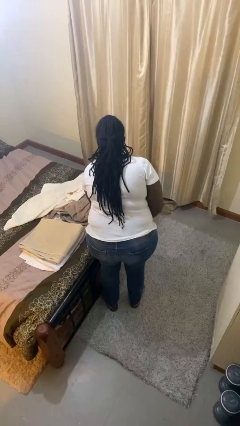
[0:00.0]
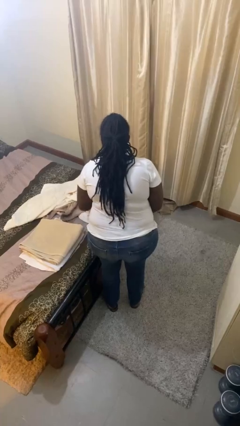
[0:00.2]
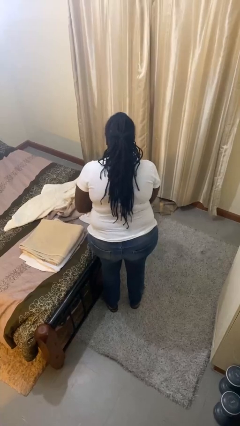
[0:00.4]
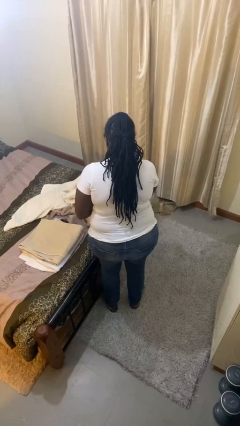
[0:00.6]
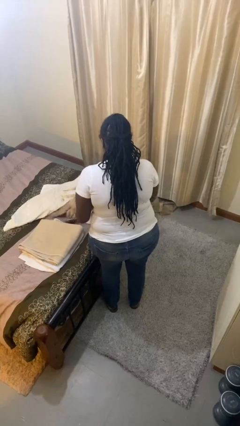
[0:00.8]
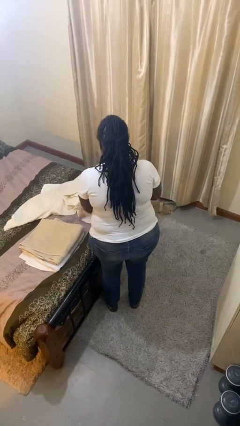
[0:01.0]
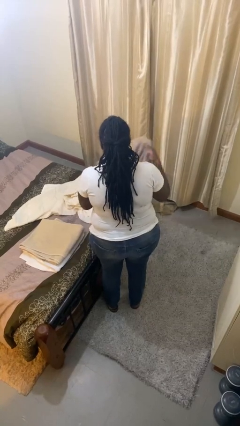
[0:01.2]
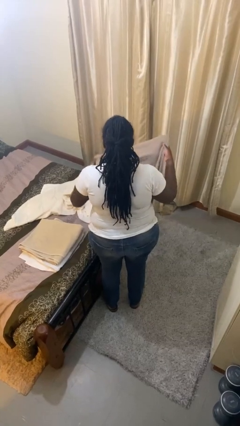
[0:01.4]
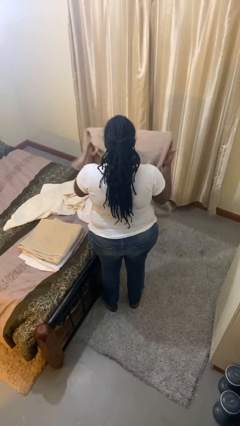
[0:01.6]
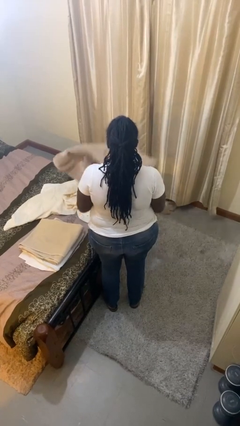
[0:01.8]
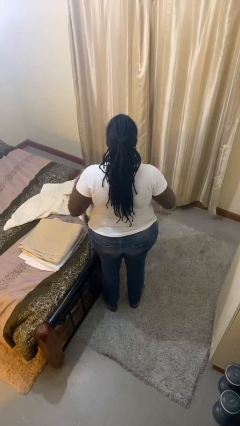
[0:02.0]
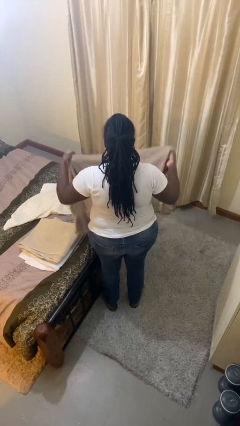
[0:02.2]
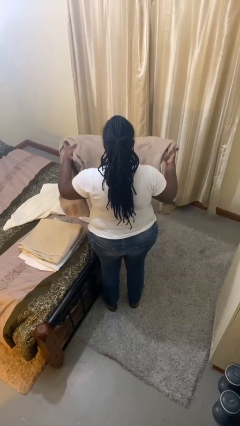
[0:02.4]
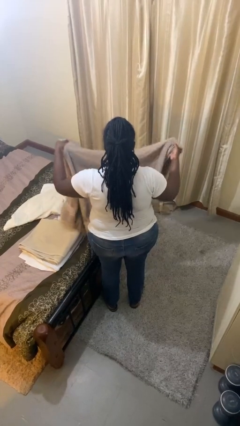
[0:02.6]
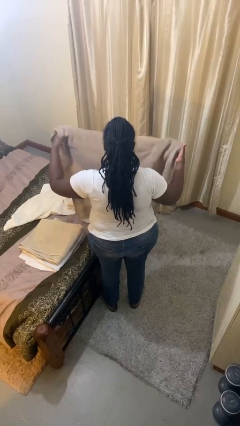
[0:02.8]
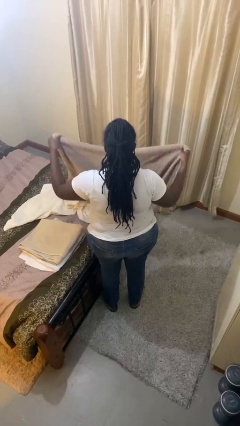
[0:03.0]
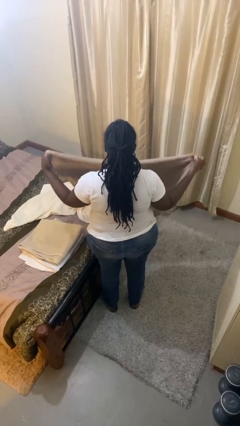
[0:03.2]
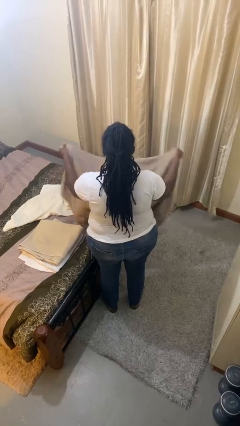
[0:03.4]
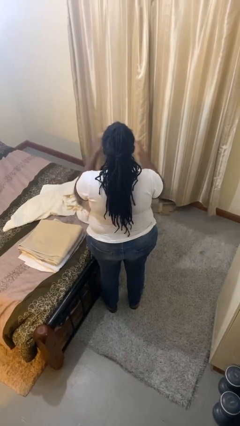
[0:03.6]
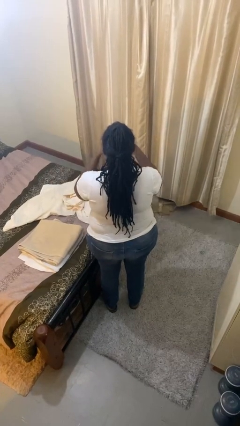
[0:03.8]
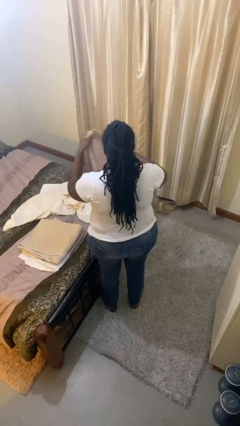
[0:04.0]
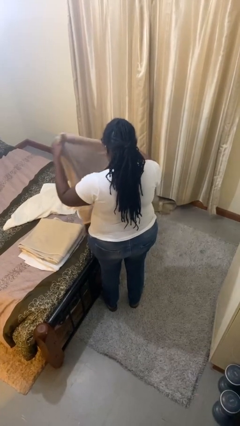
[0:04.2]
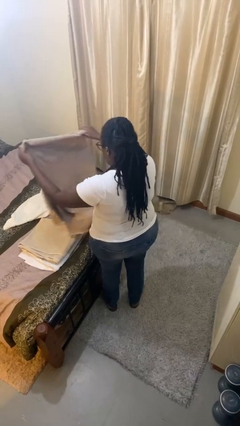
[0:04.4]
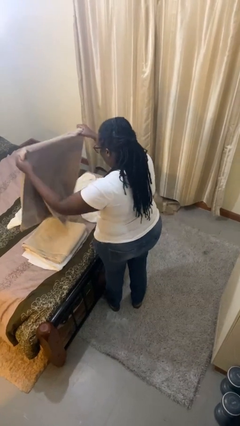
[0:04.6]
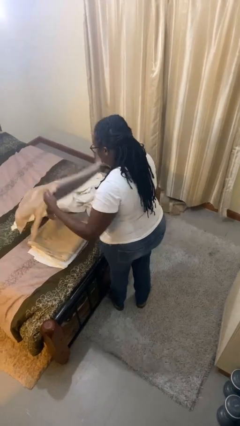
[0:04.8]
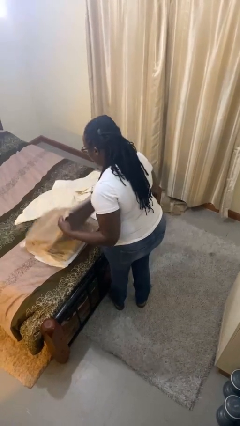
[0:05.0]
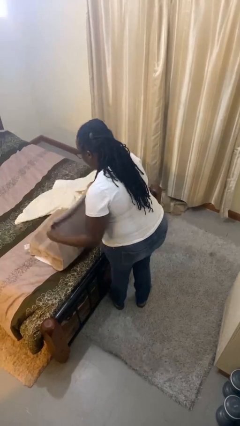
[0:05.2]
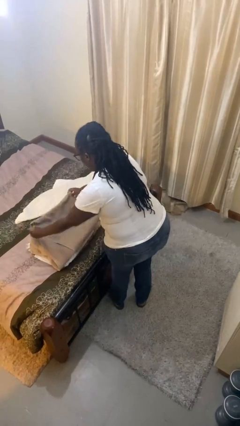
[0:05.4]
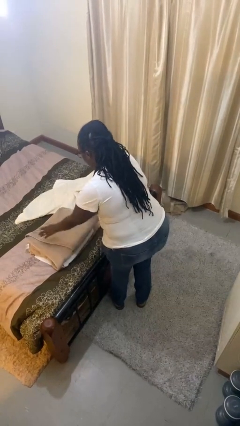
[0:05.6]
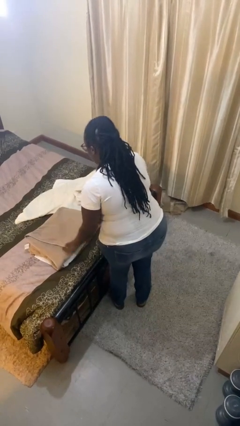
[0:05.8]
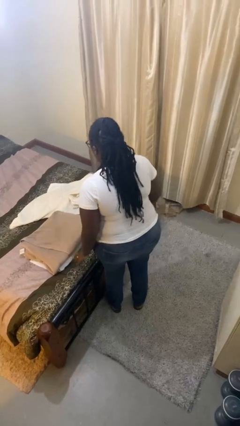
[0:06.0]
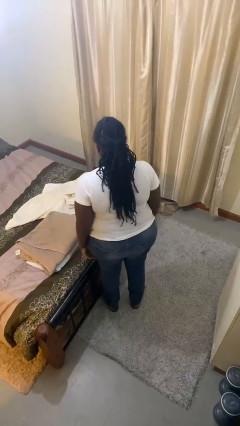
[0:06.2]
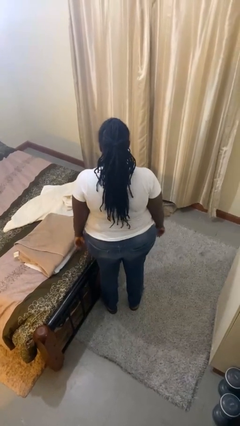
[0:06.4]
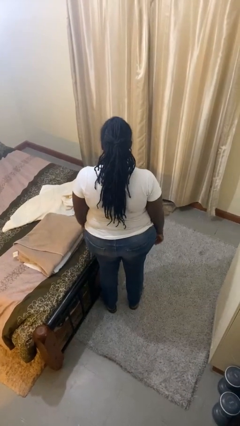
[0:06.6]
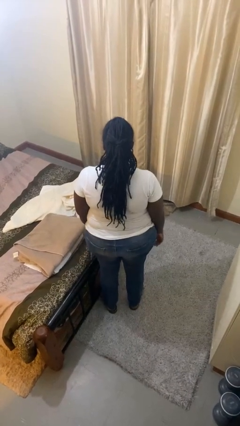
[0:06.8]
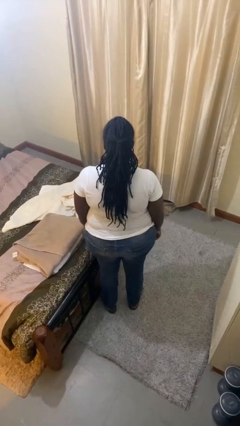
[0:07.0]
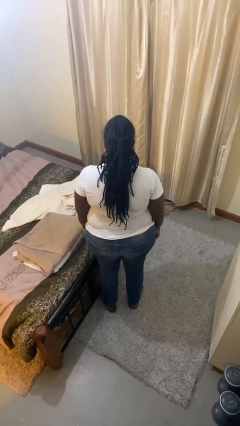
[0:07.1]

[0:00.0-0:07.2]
person folds towel

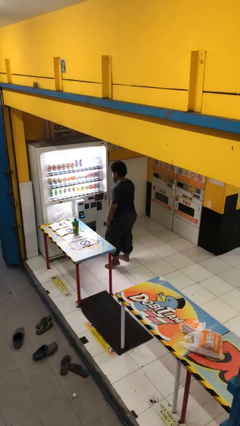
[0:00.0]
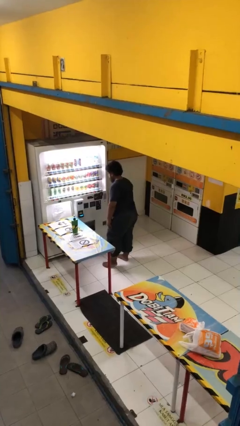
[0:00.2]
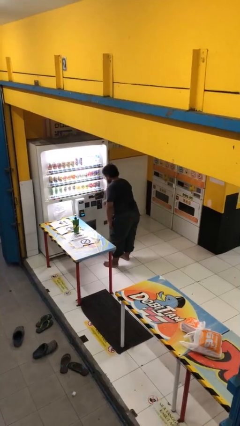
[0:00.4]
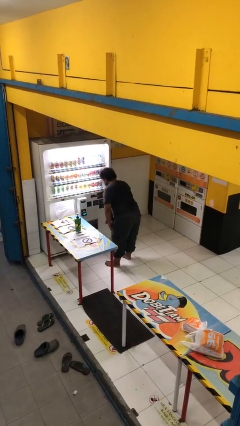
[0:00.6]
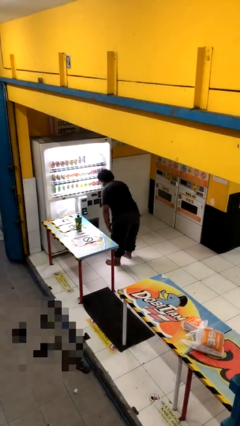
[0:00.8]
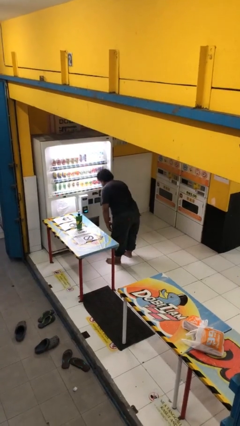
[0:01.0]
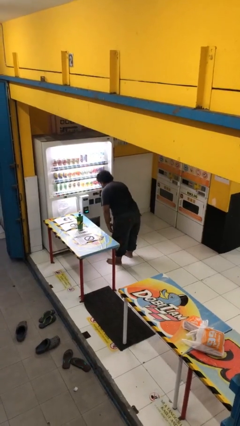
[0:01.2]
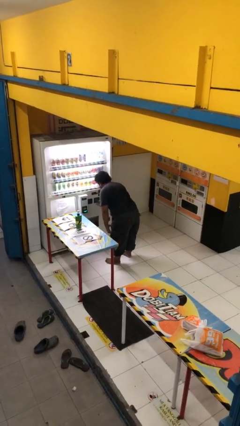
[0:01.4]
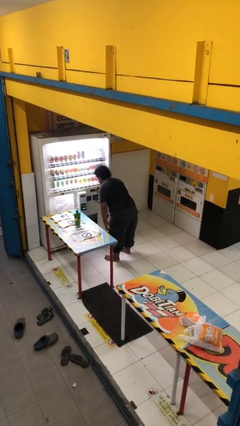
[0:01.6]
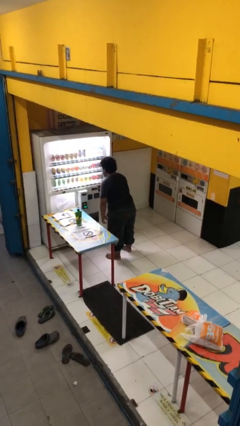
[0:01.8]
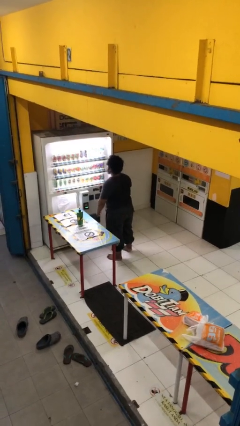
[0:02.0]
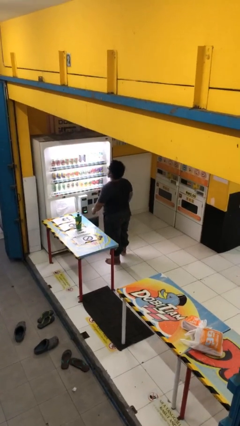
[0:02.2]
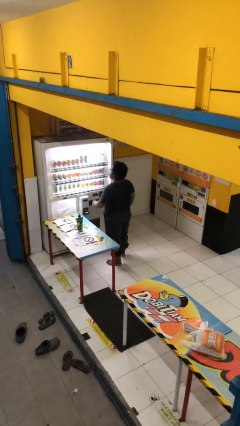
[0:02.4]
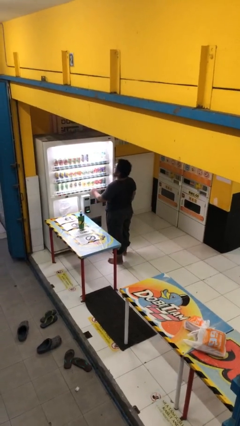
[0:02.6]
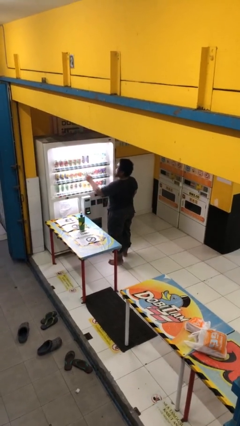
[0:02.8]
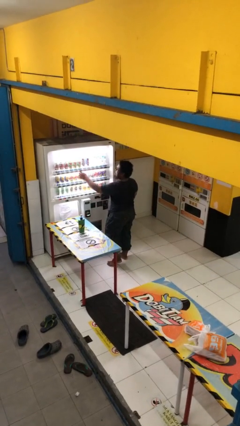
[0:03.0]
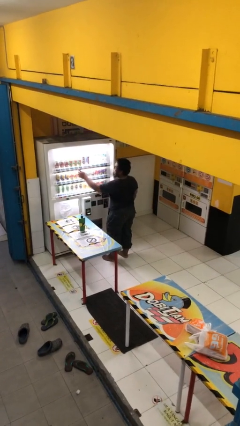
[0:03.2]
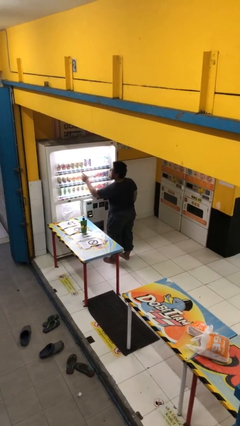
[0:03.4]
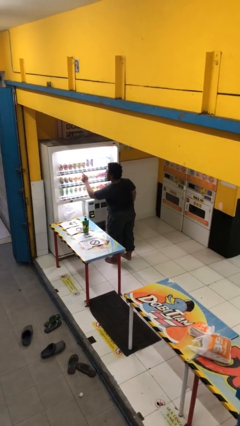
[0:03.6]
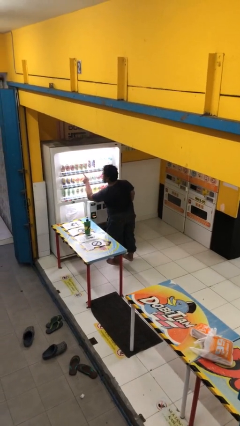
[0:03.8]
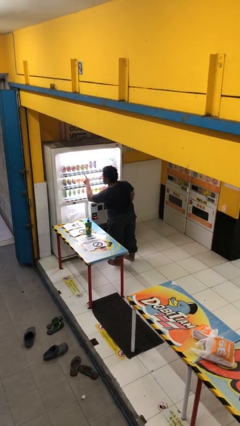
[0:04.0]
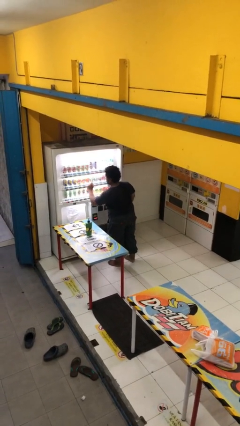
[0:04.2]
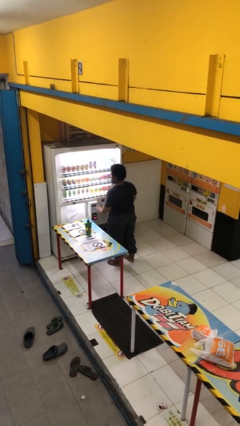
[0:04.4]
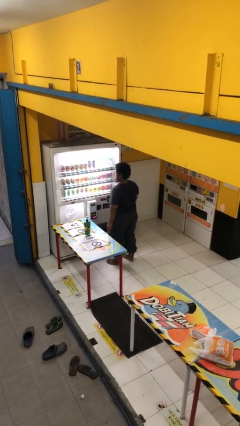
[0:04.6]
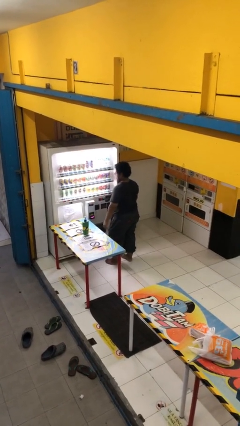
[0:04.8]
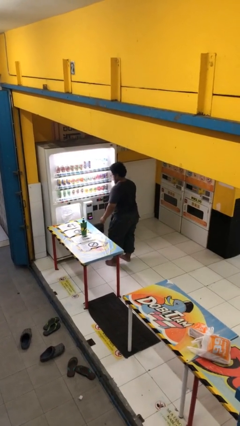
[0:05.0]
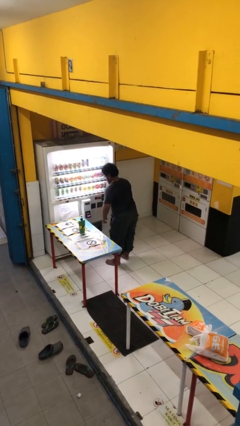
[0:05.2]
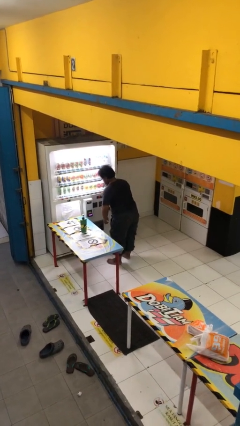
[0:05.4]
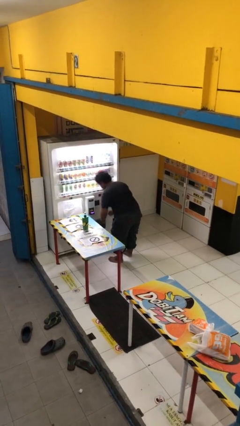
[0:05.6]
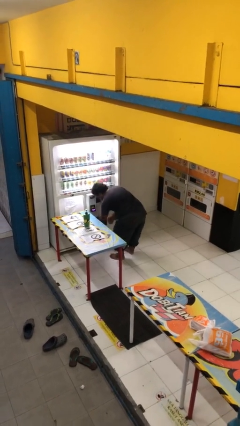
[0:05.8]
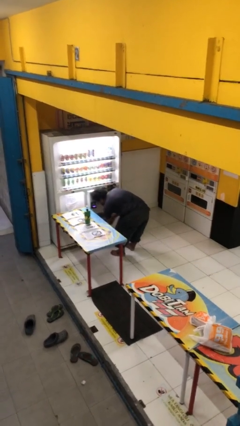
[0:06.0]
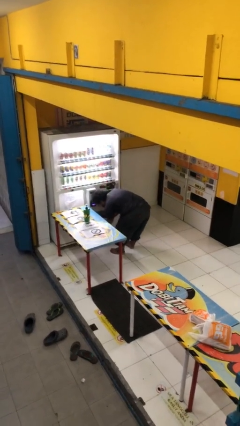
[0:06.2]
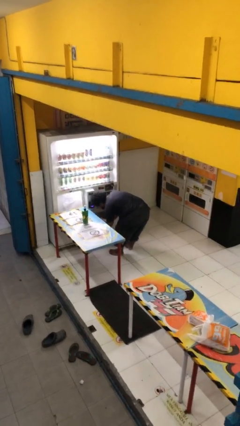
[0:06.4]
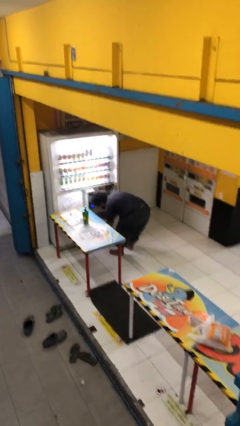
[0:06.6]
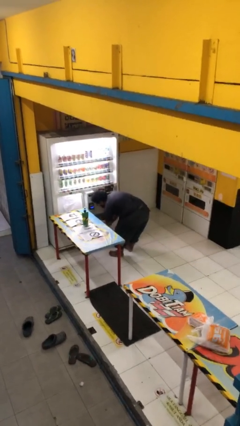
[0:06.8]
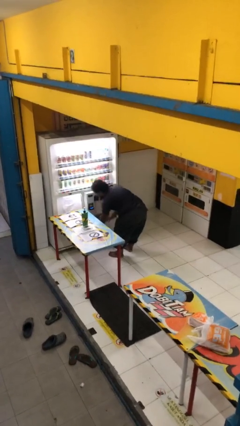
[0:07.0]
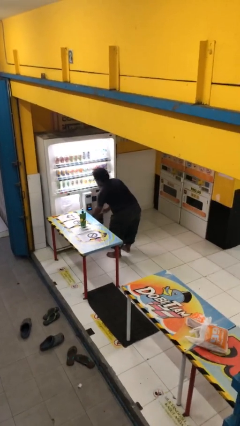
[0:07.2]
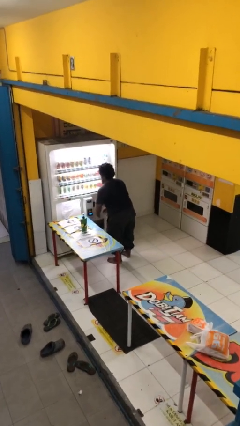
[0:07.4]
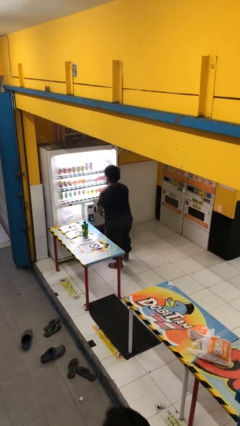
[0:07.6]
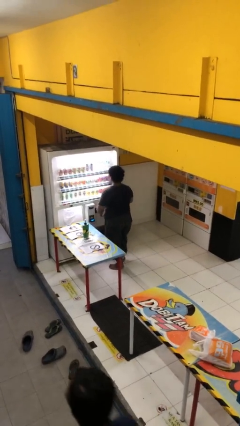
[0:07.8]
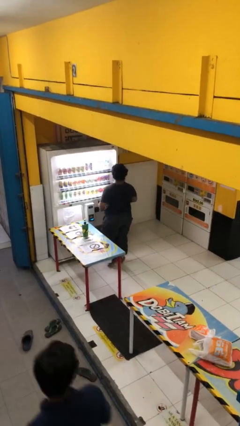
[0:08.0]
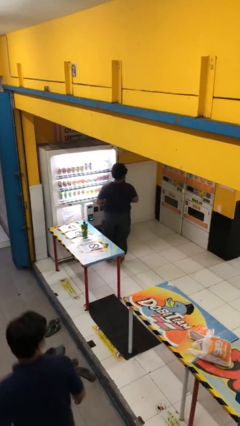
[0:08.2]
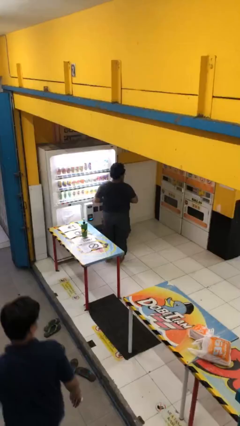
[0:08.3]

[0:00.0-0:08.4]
person purchases from machine

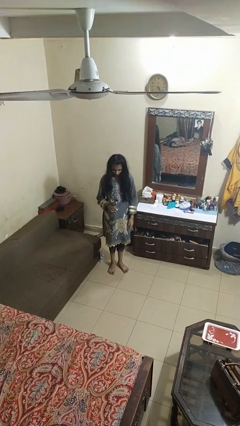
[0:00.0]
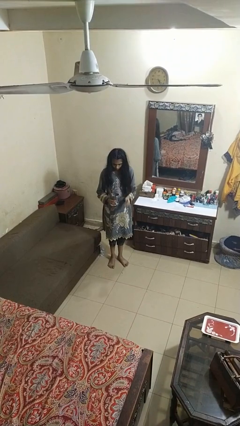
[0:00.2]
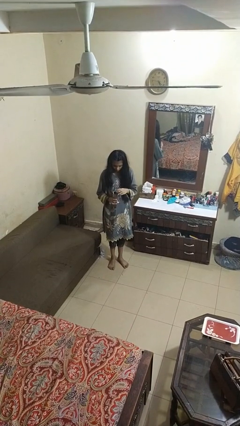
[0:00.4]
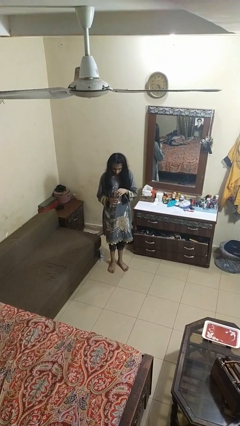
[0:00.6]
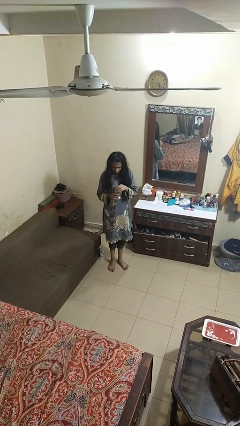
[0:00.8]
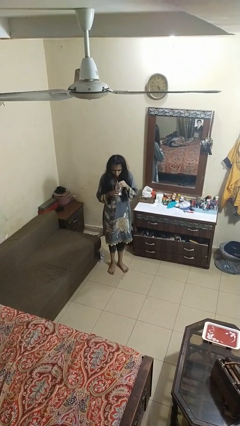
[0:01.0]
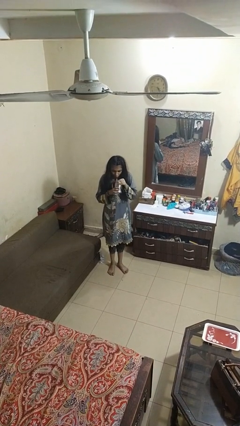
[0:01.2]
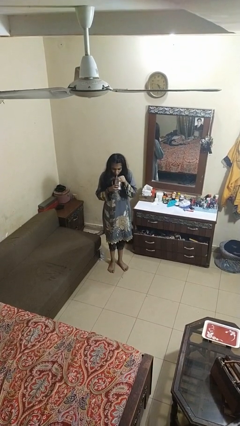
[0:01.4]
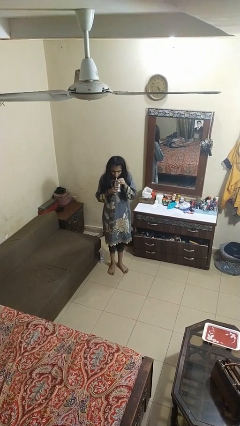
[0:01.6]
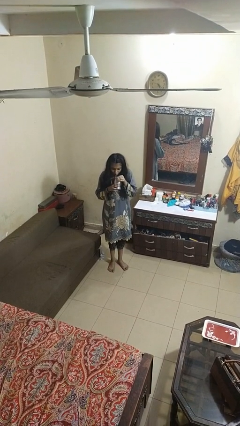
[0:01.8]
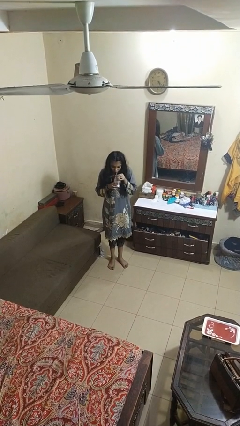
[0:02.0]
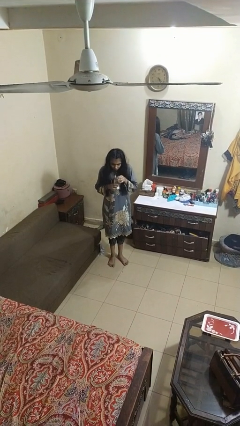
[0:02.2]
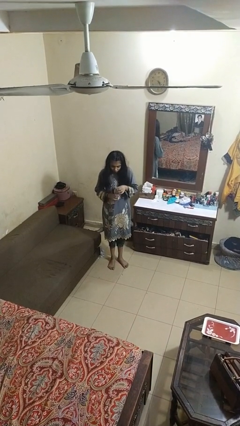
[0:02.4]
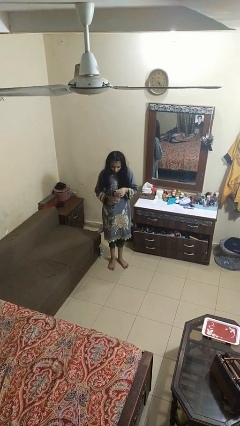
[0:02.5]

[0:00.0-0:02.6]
person drinks from straw
